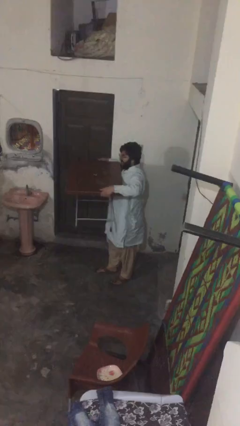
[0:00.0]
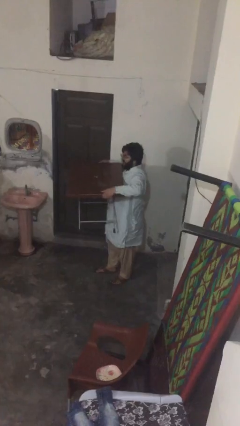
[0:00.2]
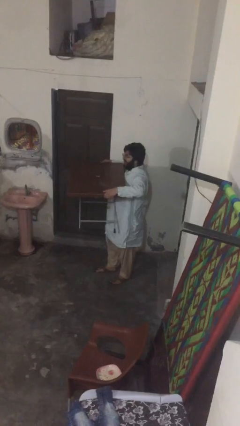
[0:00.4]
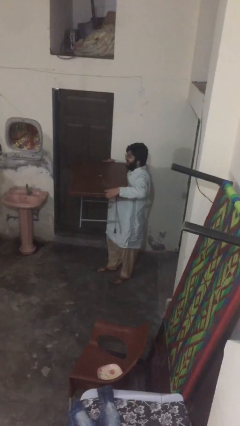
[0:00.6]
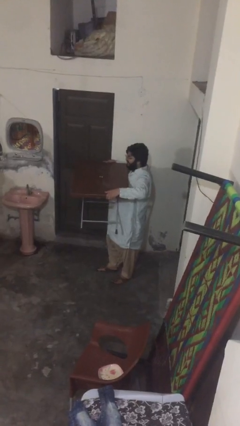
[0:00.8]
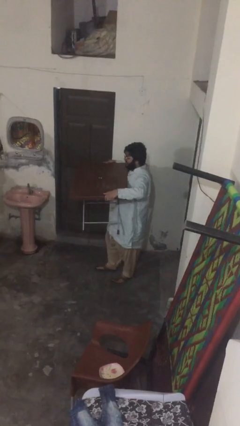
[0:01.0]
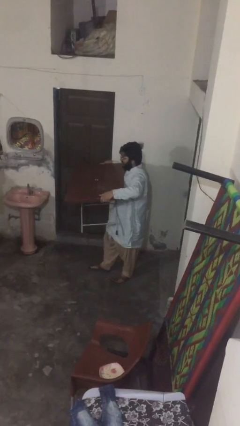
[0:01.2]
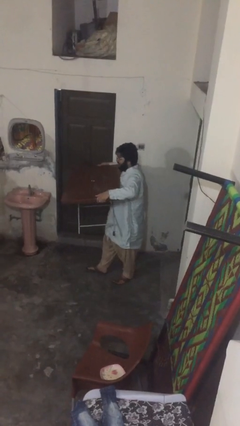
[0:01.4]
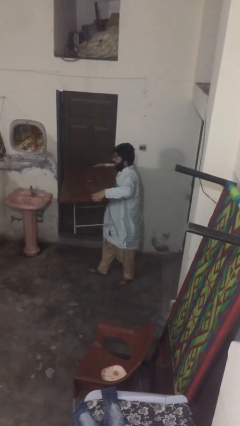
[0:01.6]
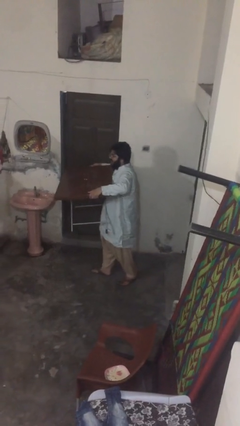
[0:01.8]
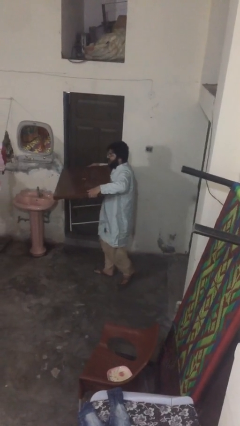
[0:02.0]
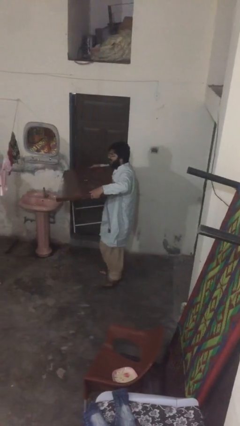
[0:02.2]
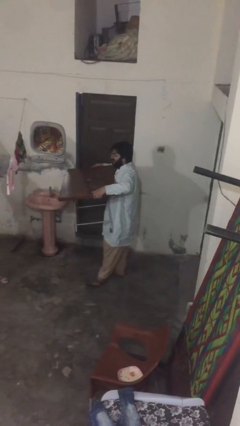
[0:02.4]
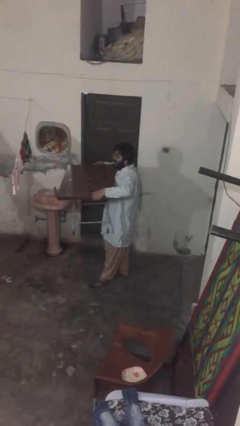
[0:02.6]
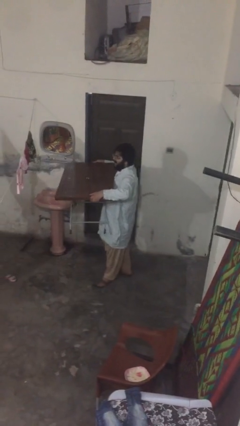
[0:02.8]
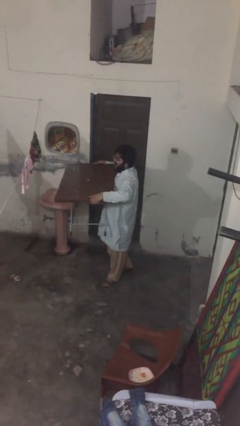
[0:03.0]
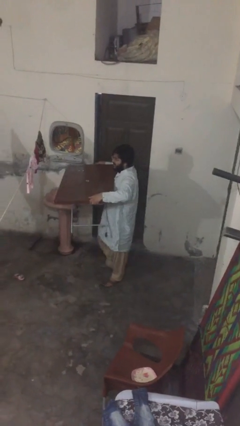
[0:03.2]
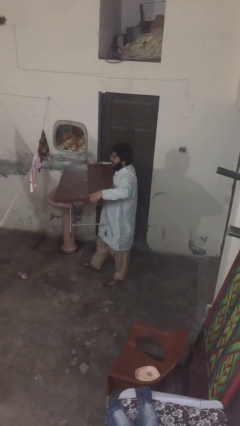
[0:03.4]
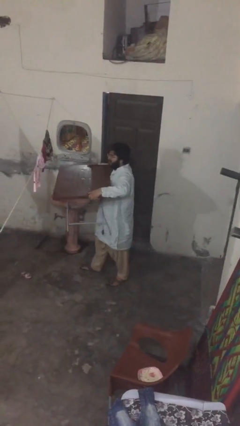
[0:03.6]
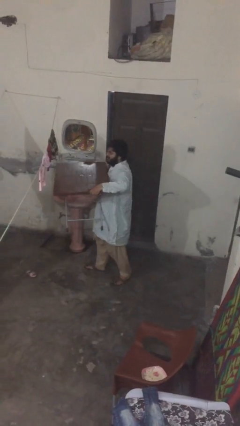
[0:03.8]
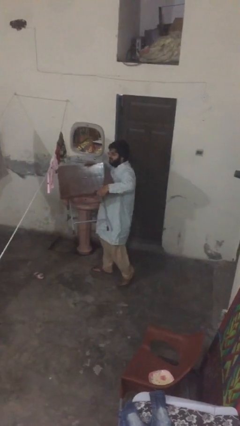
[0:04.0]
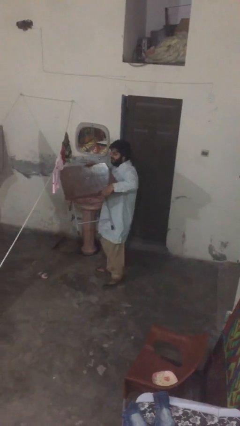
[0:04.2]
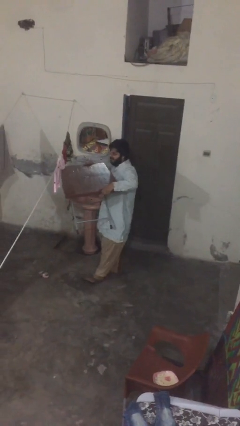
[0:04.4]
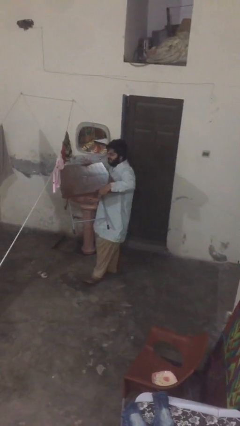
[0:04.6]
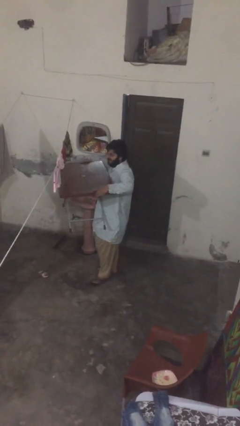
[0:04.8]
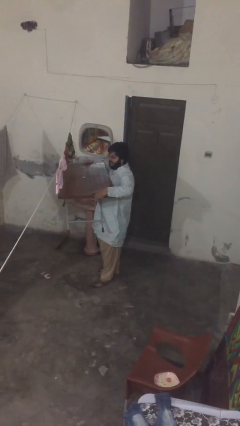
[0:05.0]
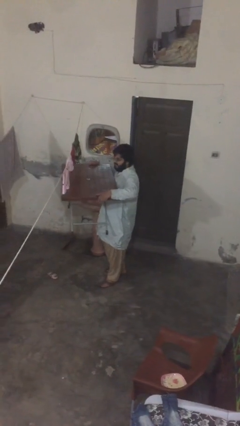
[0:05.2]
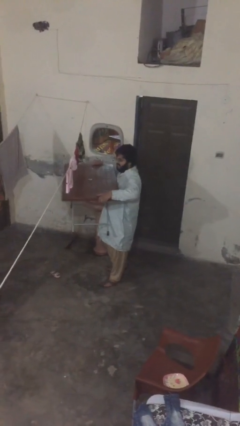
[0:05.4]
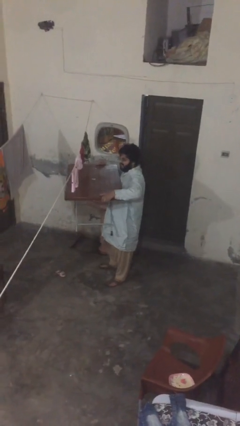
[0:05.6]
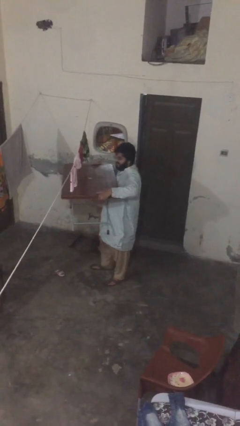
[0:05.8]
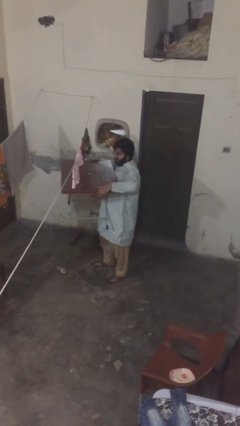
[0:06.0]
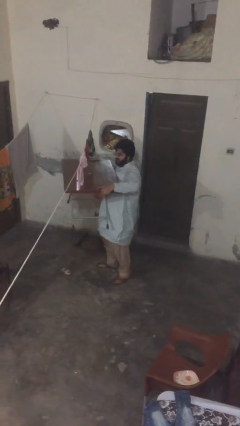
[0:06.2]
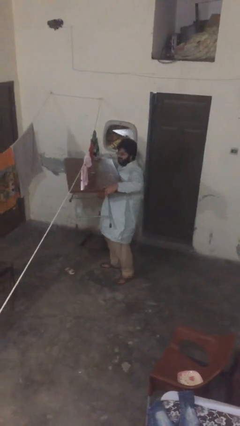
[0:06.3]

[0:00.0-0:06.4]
person carries heavy object

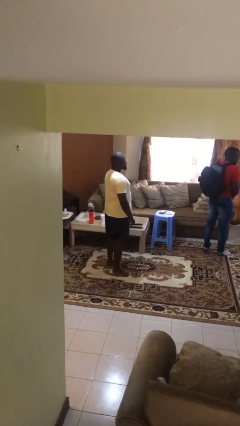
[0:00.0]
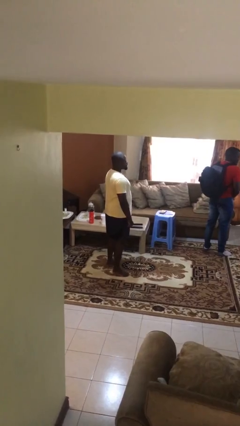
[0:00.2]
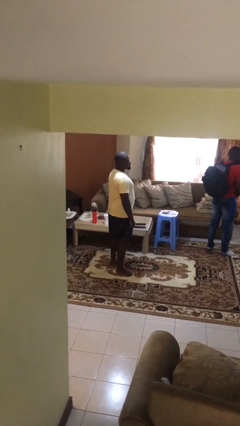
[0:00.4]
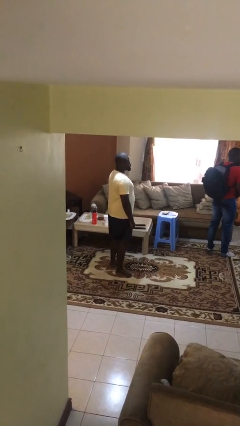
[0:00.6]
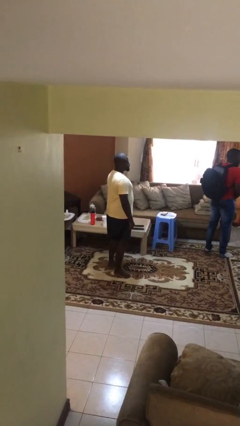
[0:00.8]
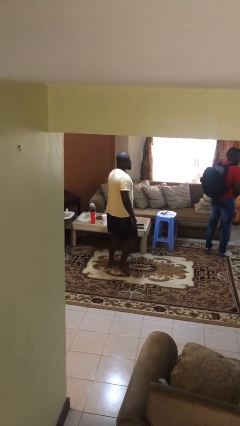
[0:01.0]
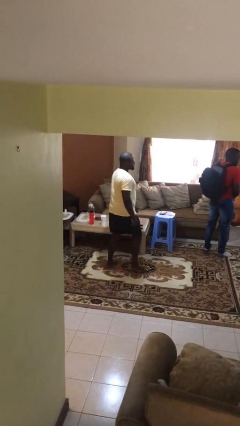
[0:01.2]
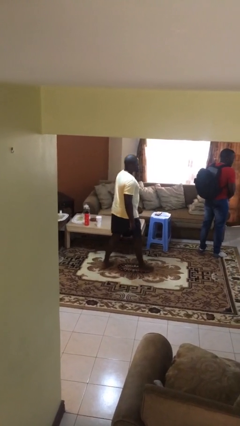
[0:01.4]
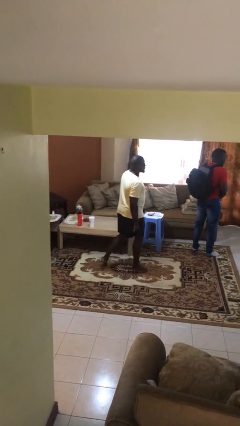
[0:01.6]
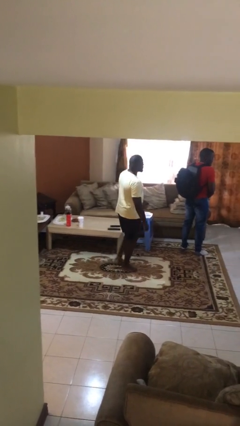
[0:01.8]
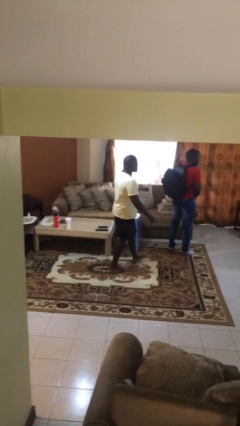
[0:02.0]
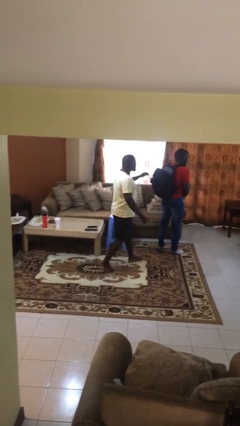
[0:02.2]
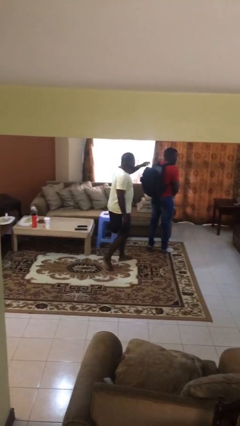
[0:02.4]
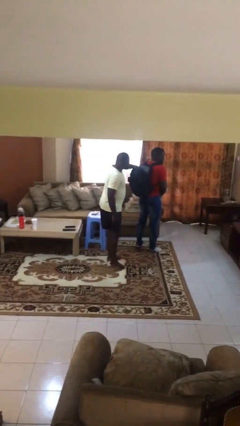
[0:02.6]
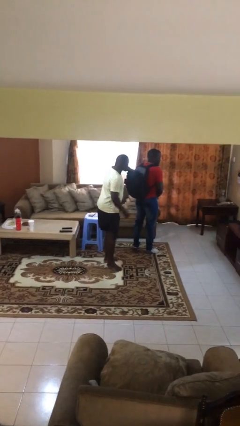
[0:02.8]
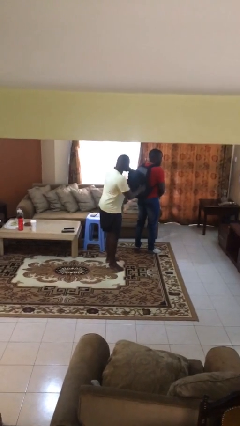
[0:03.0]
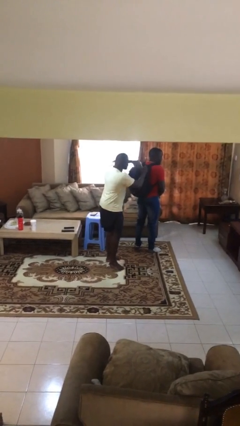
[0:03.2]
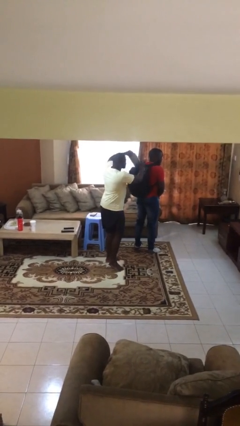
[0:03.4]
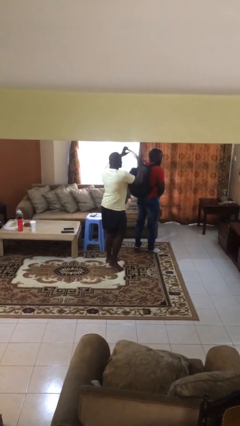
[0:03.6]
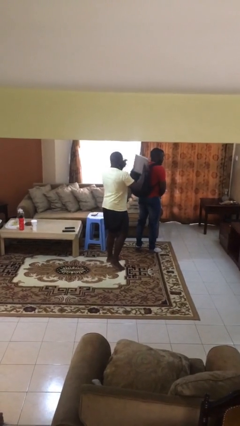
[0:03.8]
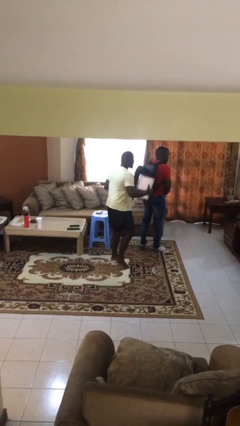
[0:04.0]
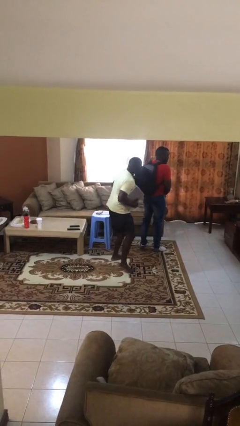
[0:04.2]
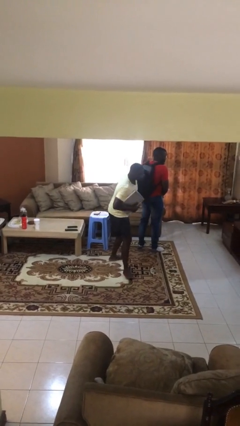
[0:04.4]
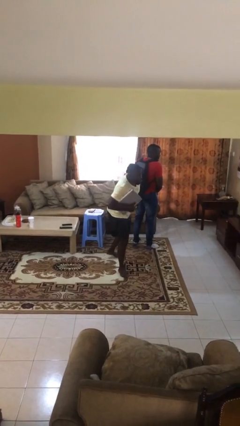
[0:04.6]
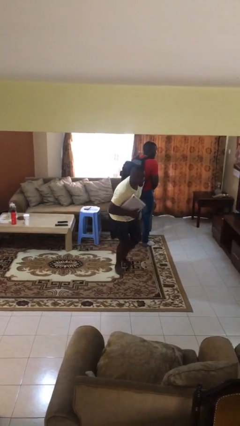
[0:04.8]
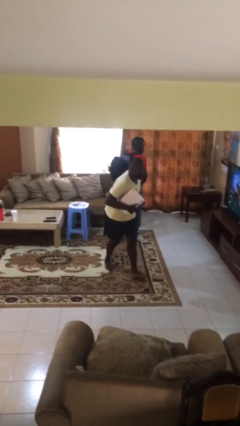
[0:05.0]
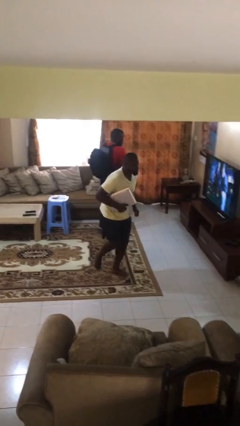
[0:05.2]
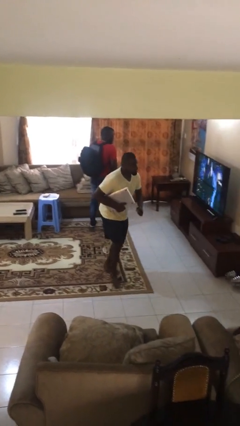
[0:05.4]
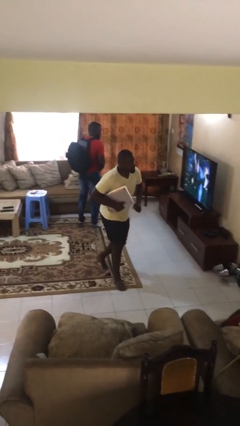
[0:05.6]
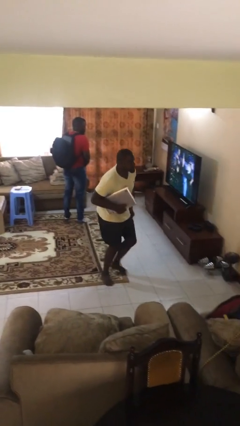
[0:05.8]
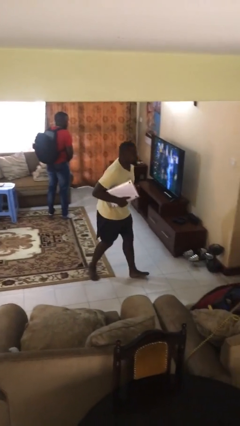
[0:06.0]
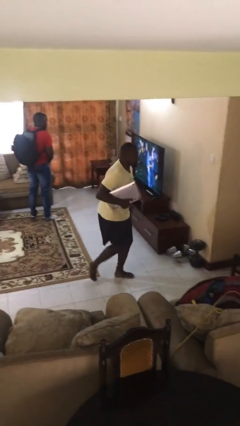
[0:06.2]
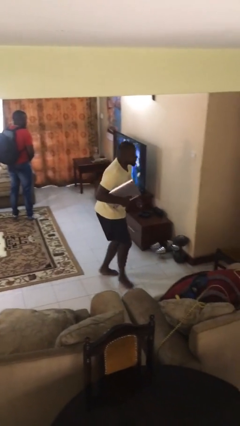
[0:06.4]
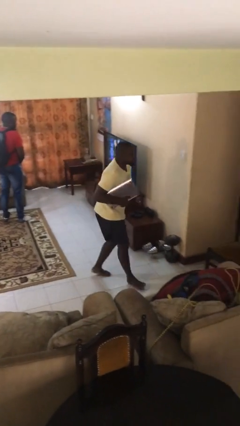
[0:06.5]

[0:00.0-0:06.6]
person steals object from person

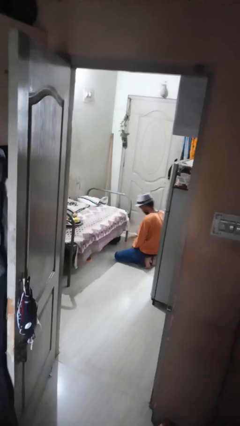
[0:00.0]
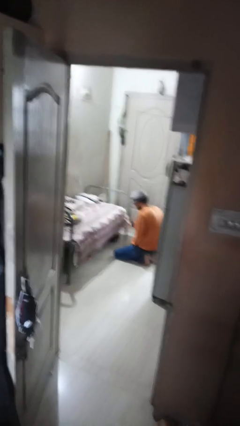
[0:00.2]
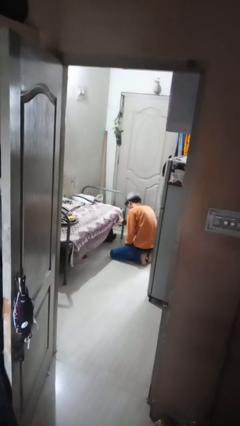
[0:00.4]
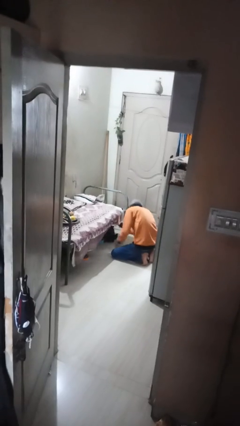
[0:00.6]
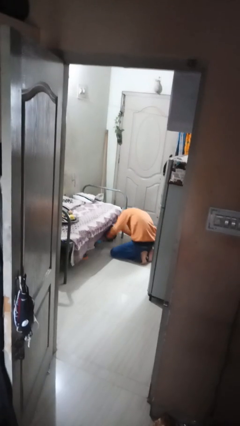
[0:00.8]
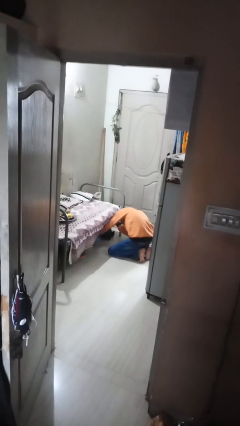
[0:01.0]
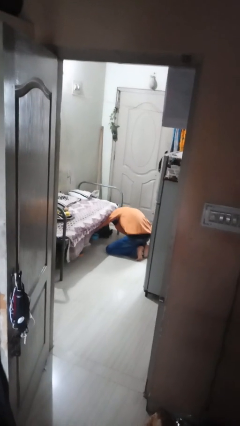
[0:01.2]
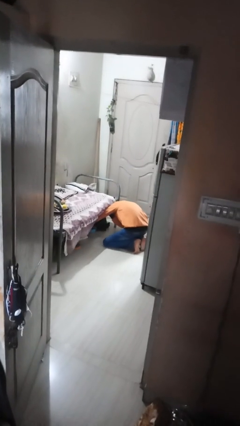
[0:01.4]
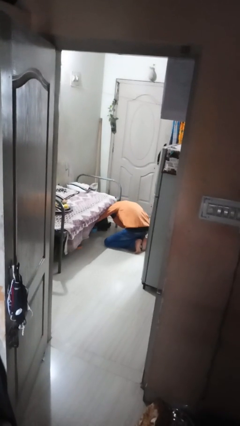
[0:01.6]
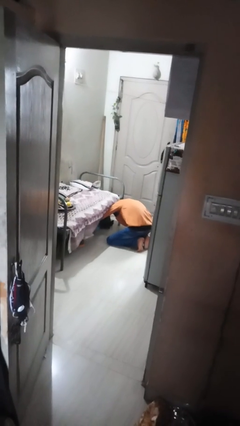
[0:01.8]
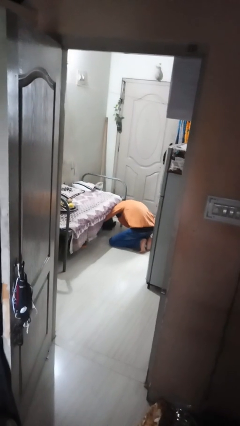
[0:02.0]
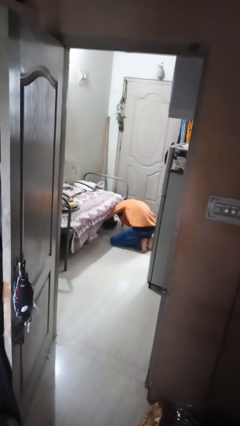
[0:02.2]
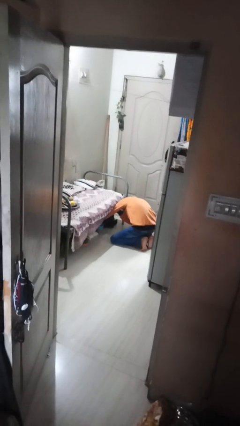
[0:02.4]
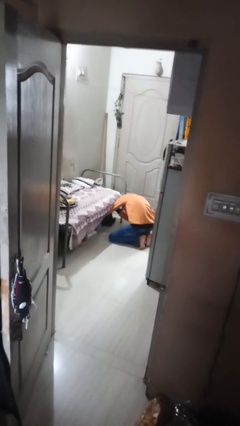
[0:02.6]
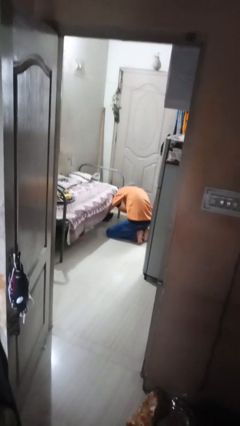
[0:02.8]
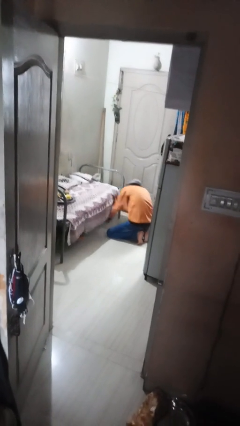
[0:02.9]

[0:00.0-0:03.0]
person searches under bed

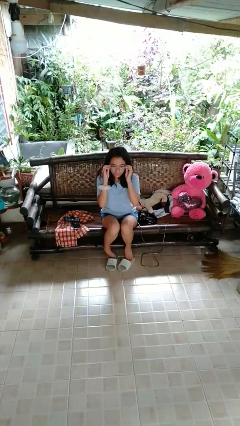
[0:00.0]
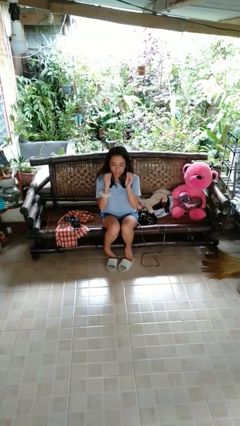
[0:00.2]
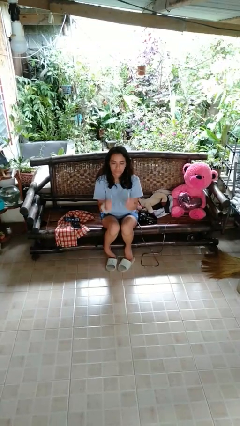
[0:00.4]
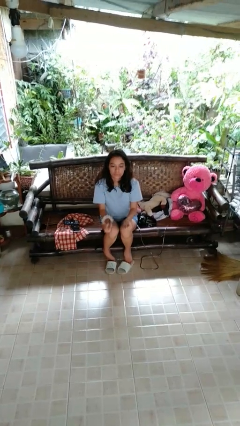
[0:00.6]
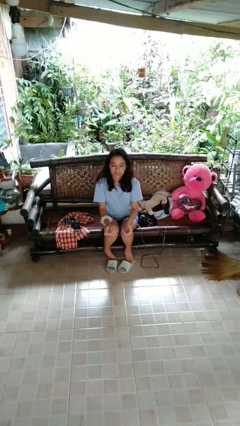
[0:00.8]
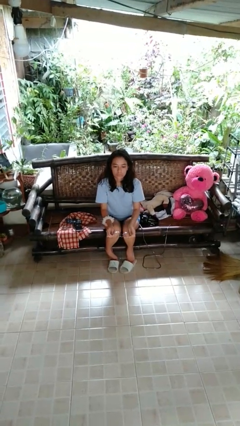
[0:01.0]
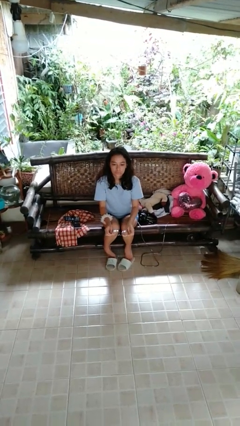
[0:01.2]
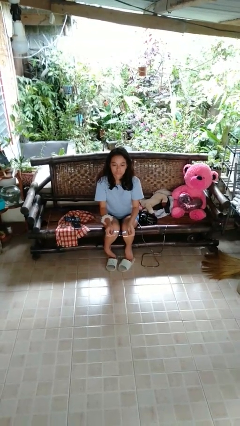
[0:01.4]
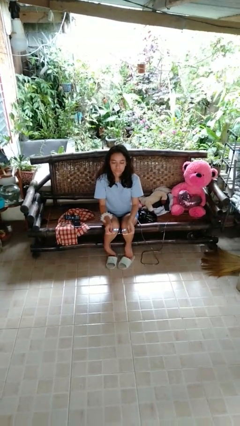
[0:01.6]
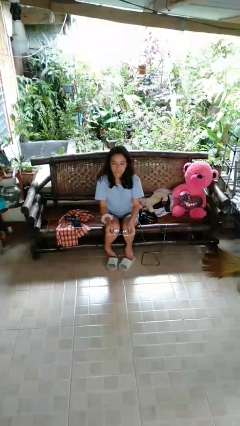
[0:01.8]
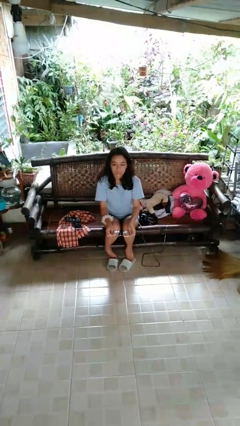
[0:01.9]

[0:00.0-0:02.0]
person grabs person by forearm
